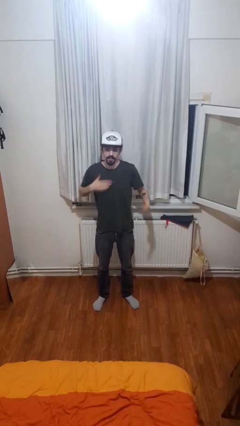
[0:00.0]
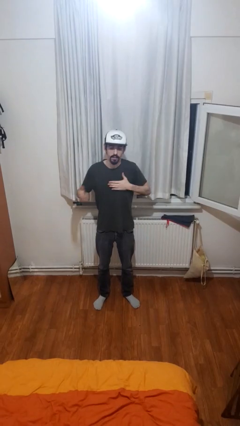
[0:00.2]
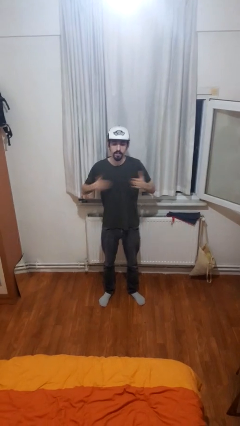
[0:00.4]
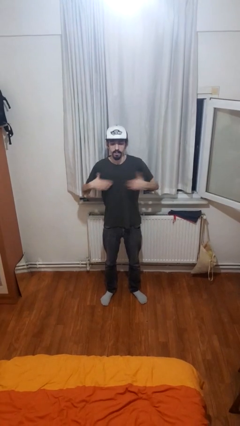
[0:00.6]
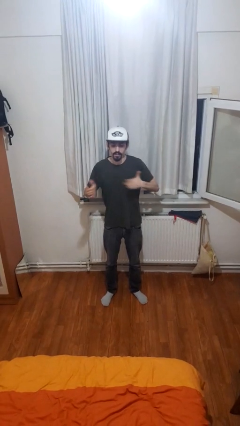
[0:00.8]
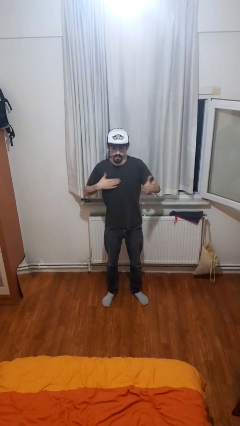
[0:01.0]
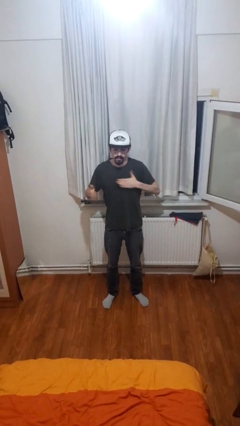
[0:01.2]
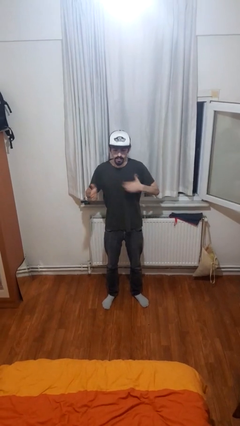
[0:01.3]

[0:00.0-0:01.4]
person drums on chest

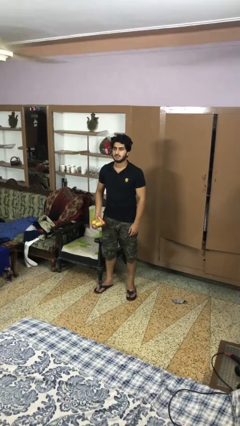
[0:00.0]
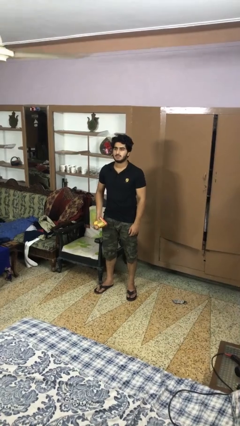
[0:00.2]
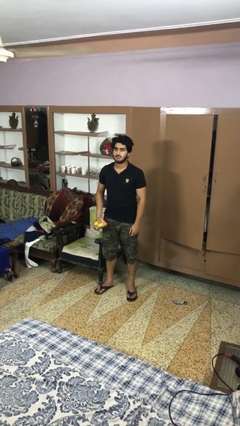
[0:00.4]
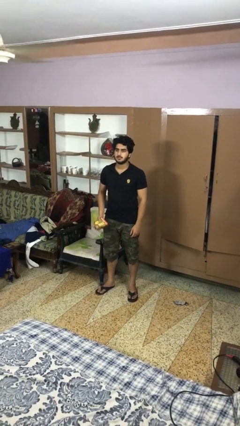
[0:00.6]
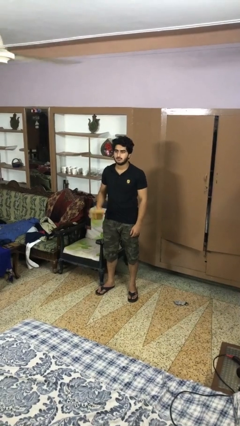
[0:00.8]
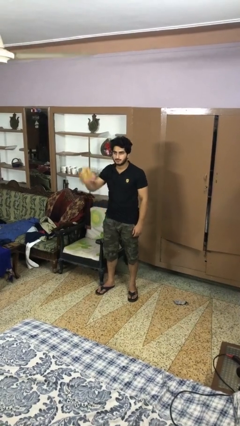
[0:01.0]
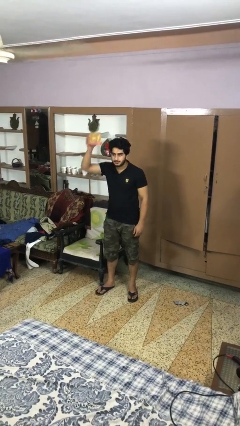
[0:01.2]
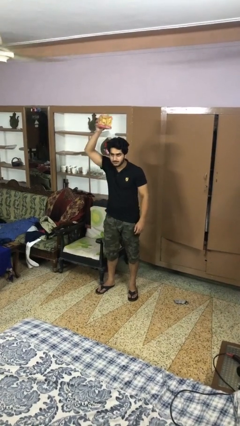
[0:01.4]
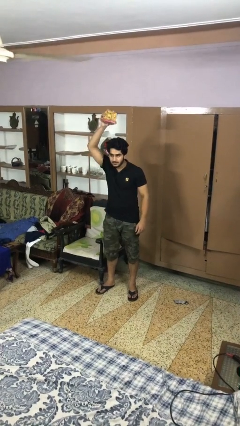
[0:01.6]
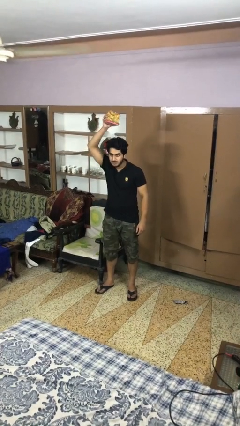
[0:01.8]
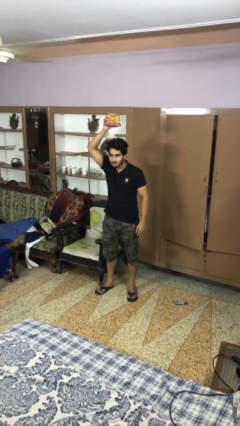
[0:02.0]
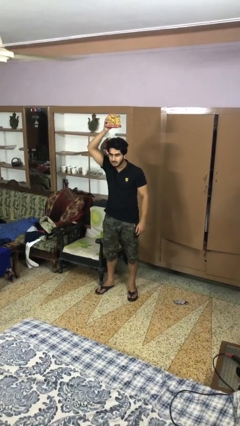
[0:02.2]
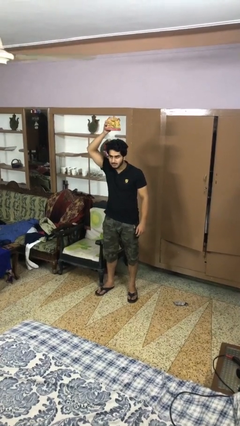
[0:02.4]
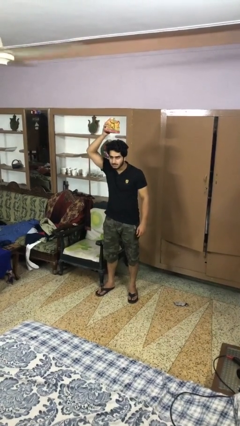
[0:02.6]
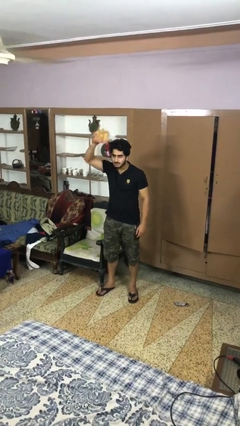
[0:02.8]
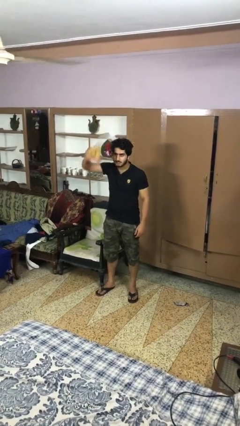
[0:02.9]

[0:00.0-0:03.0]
person holds object above head

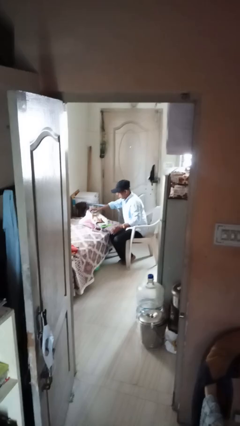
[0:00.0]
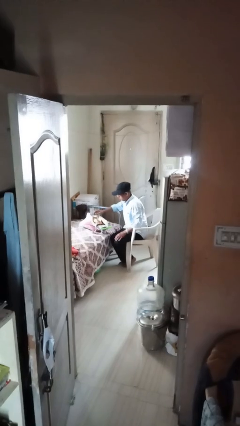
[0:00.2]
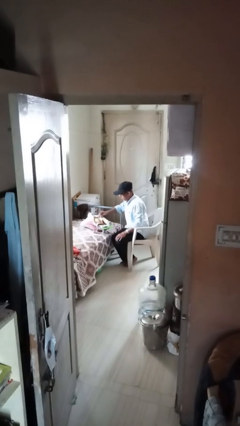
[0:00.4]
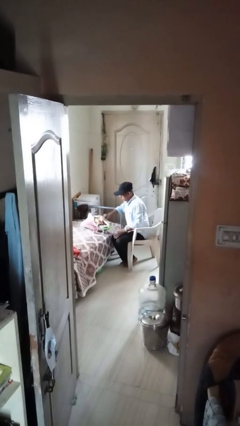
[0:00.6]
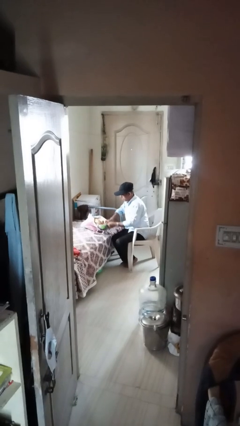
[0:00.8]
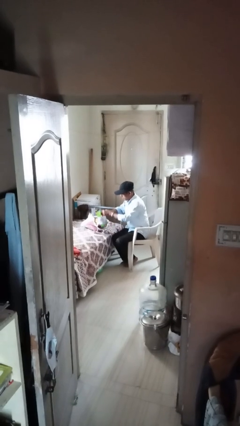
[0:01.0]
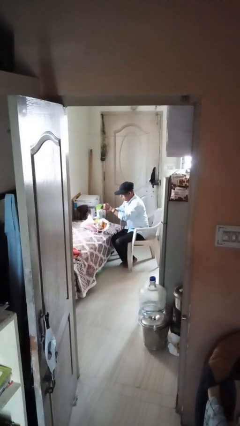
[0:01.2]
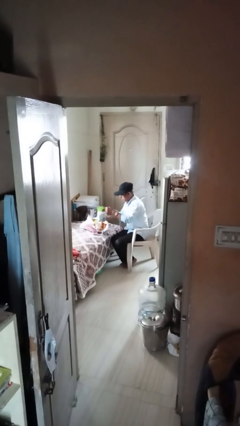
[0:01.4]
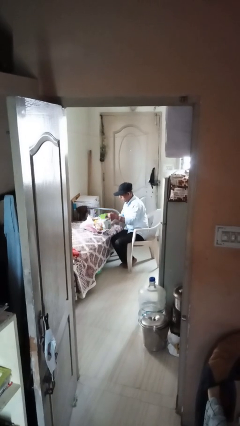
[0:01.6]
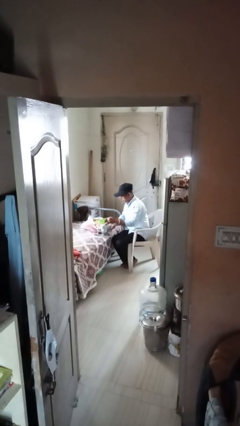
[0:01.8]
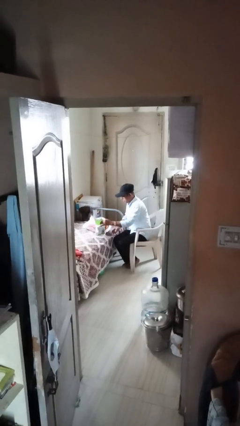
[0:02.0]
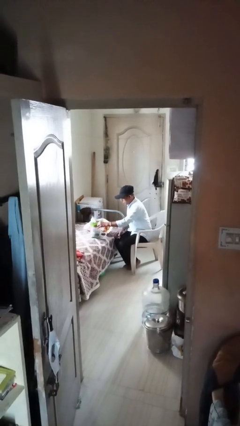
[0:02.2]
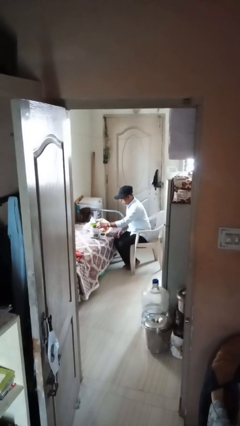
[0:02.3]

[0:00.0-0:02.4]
person takes object from bag

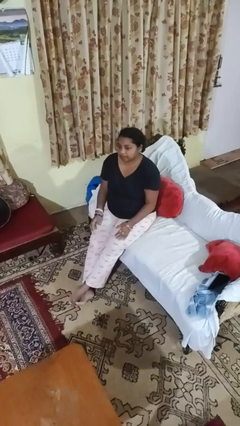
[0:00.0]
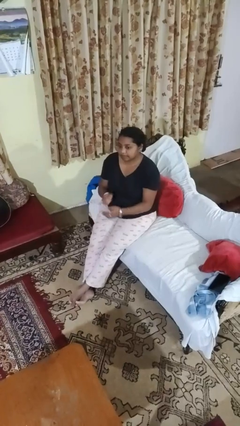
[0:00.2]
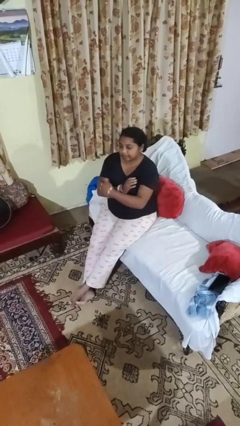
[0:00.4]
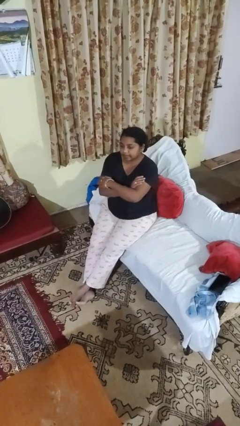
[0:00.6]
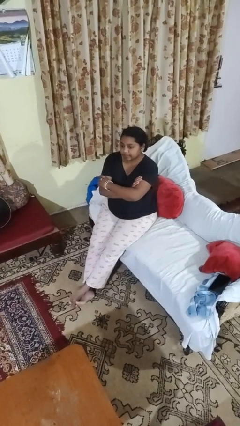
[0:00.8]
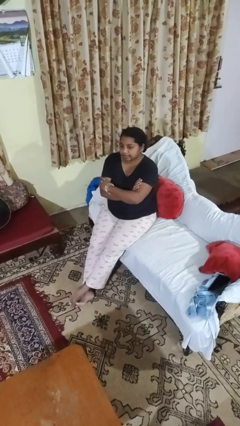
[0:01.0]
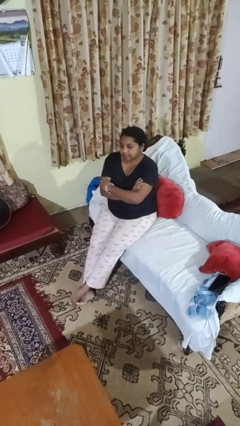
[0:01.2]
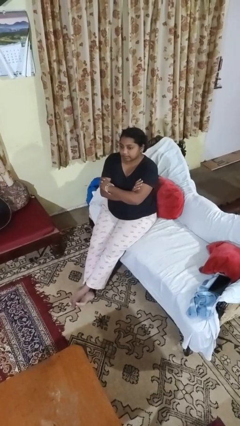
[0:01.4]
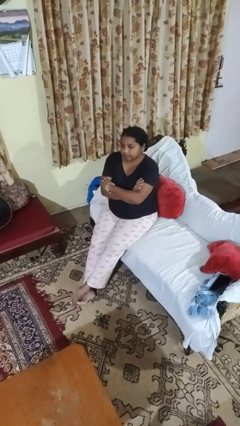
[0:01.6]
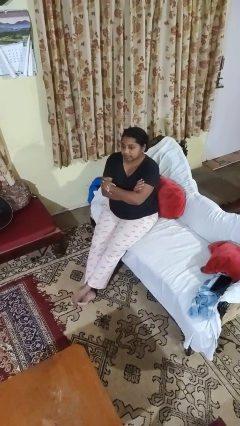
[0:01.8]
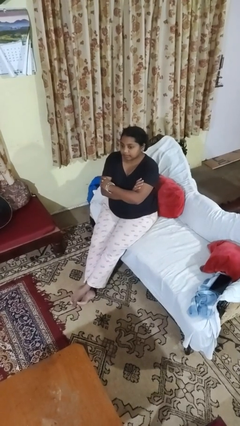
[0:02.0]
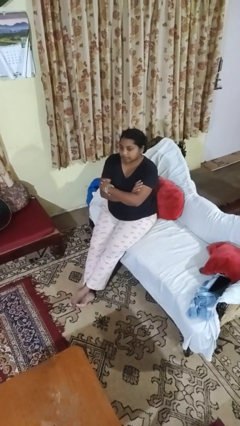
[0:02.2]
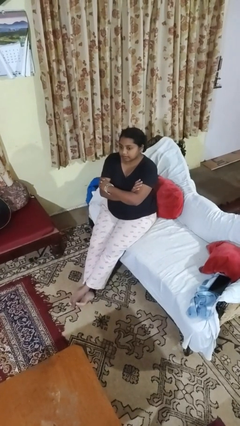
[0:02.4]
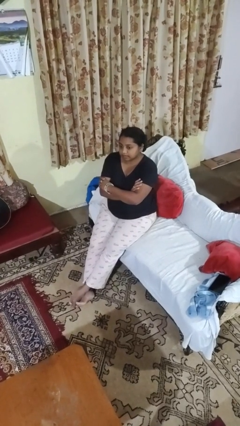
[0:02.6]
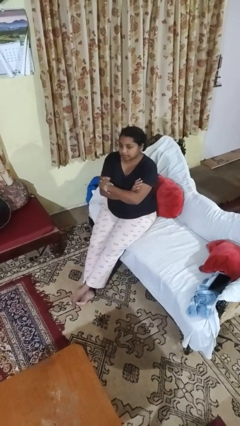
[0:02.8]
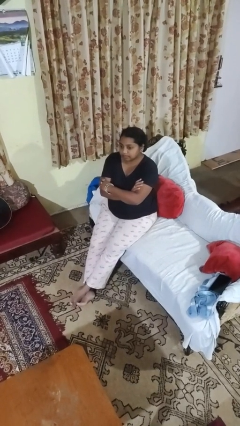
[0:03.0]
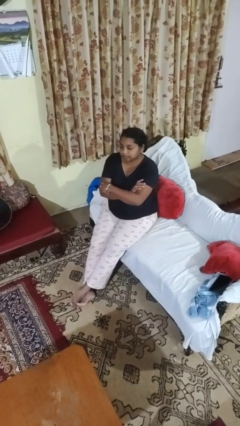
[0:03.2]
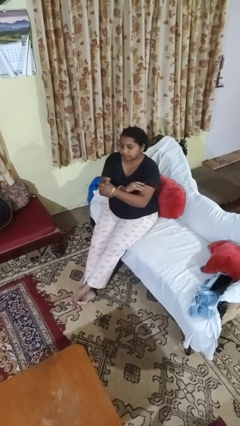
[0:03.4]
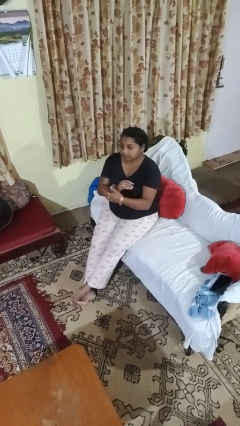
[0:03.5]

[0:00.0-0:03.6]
person crosses arms

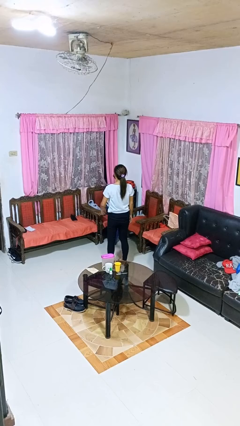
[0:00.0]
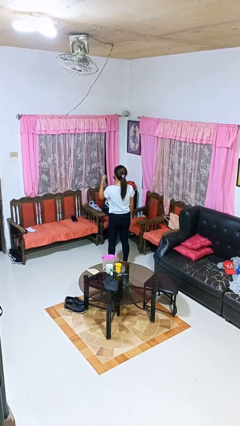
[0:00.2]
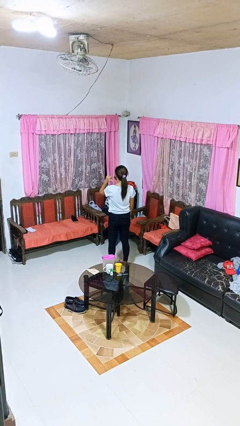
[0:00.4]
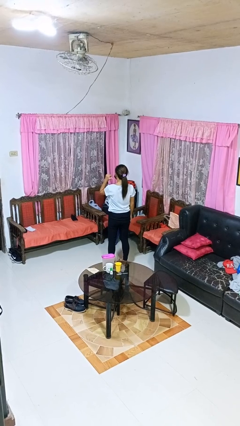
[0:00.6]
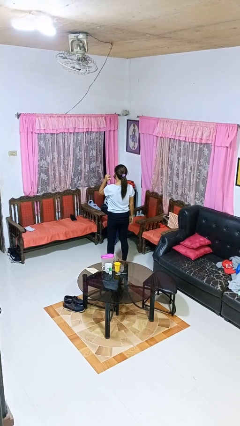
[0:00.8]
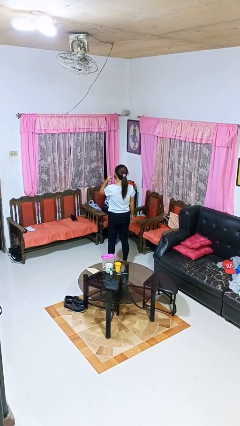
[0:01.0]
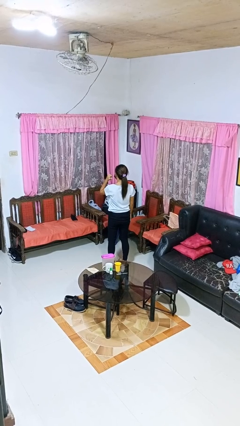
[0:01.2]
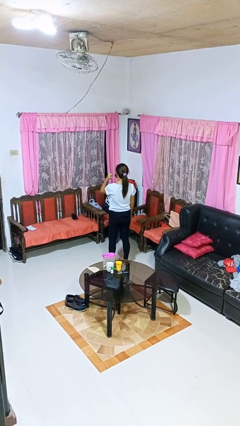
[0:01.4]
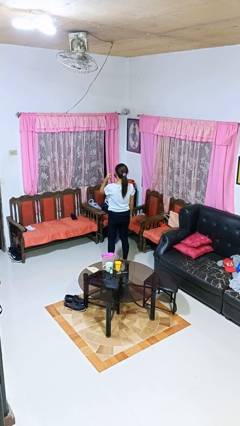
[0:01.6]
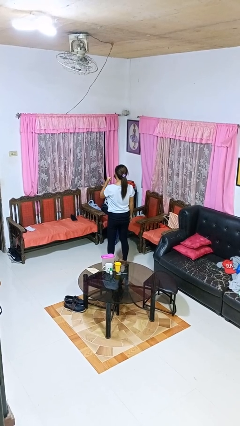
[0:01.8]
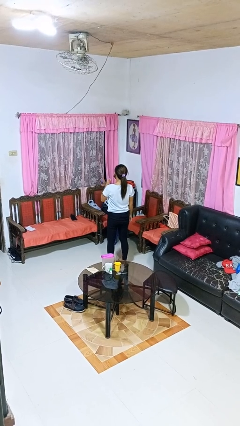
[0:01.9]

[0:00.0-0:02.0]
person gestures behind me

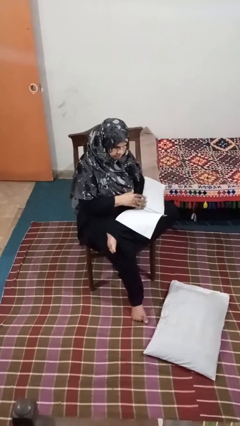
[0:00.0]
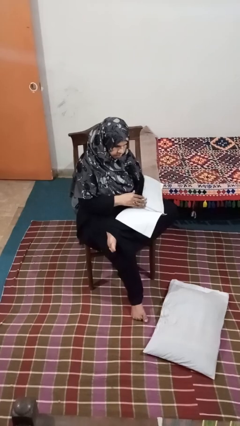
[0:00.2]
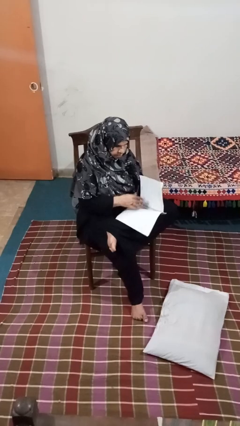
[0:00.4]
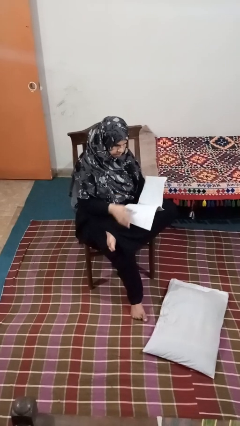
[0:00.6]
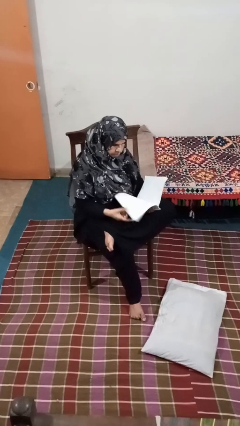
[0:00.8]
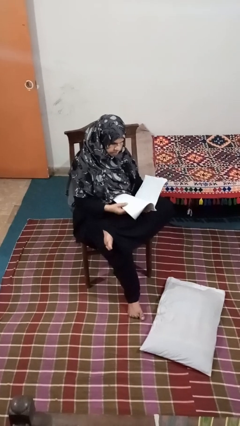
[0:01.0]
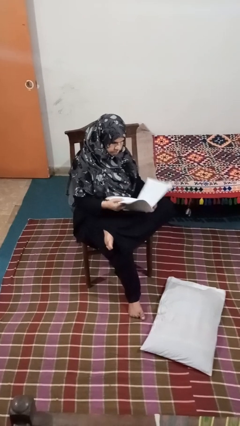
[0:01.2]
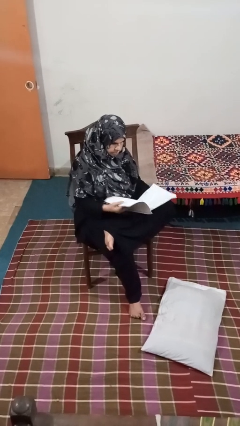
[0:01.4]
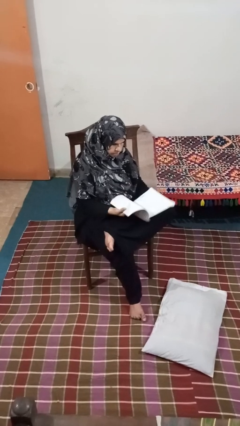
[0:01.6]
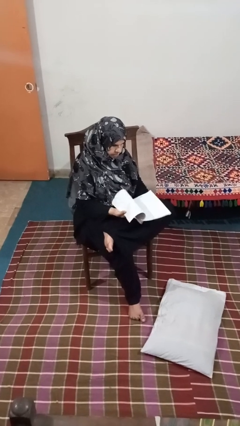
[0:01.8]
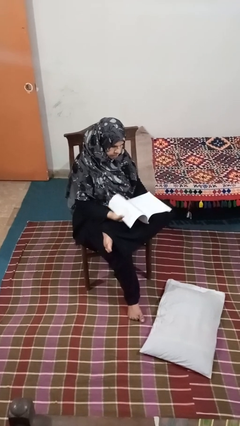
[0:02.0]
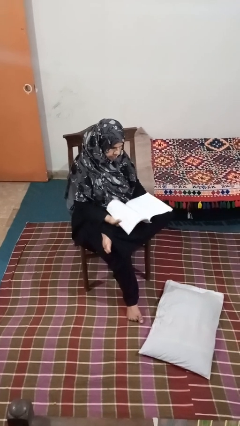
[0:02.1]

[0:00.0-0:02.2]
person reads newspaper

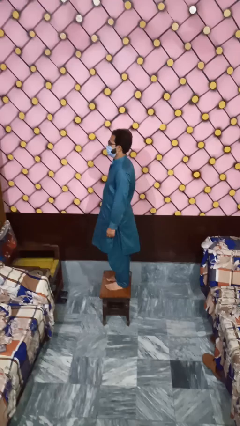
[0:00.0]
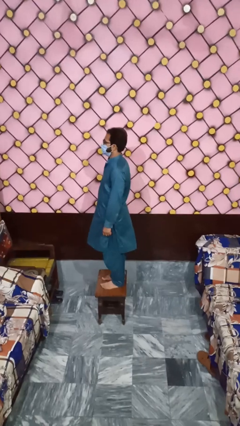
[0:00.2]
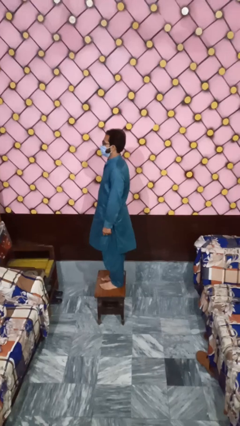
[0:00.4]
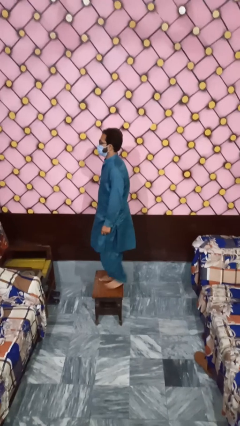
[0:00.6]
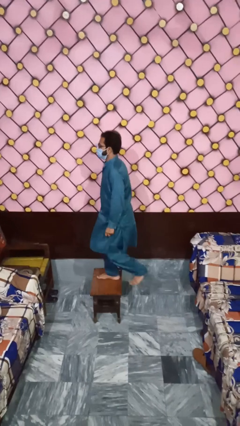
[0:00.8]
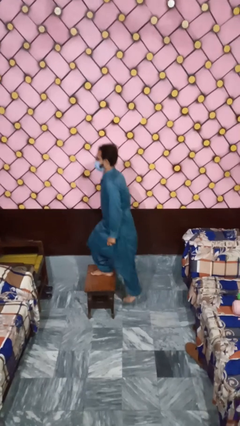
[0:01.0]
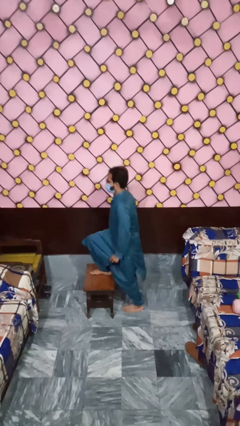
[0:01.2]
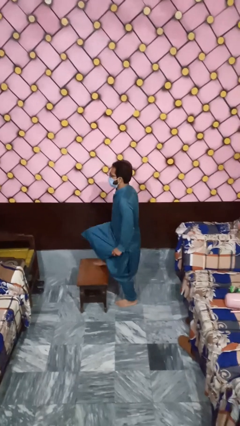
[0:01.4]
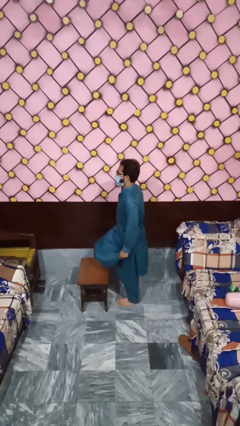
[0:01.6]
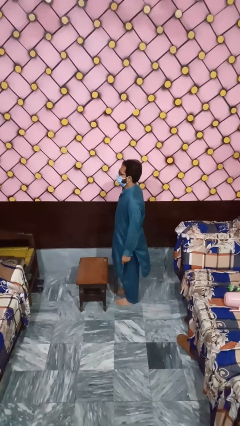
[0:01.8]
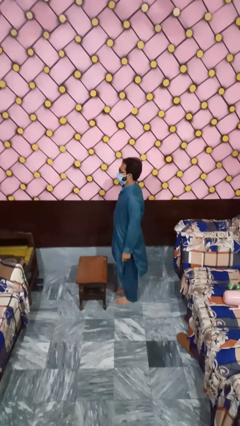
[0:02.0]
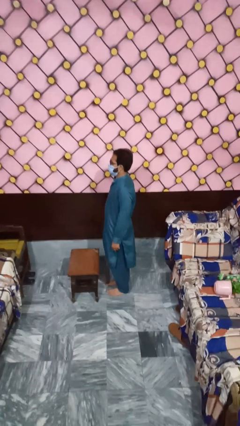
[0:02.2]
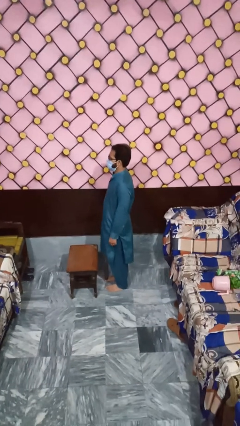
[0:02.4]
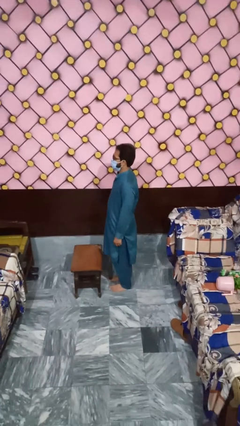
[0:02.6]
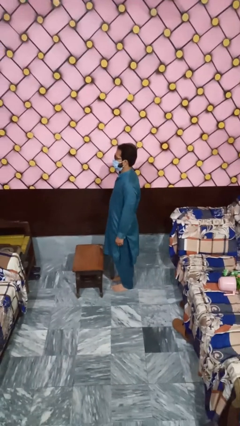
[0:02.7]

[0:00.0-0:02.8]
person climbs off table
